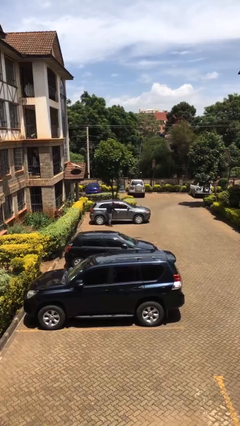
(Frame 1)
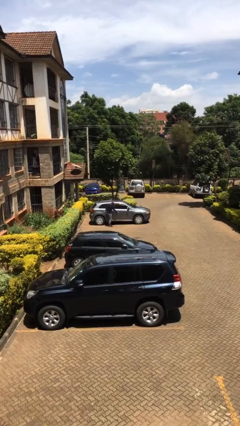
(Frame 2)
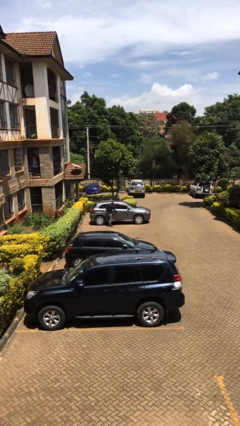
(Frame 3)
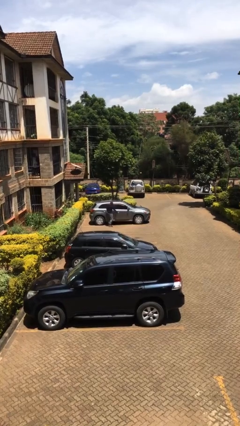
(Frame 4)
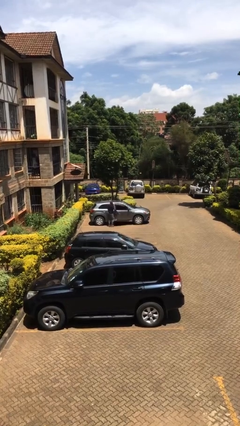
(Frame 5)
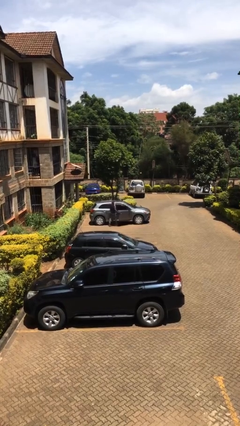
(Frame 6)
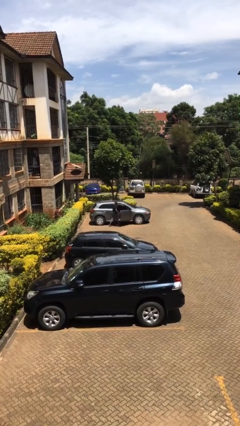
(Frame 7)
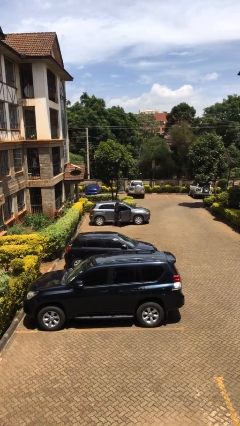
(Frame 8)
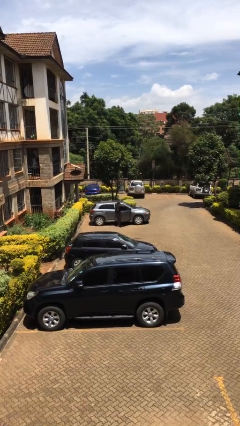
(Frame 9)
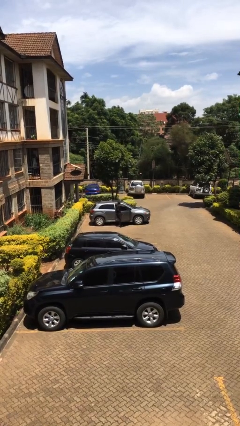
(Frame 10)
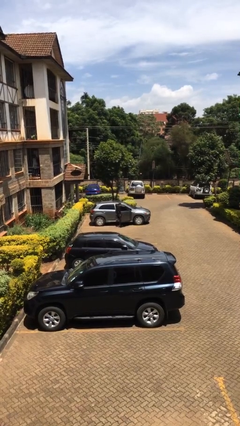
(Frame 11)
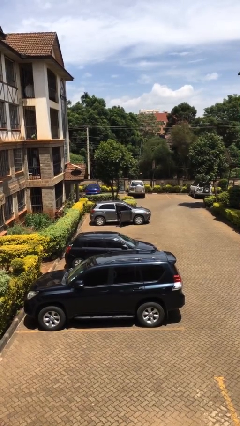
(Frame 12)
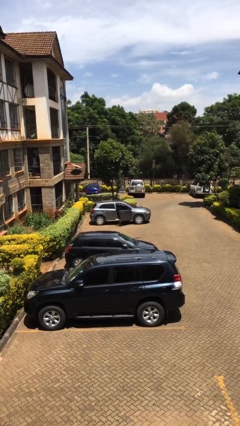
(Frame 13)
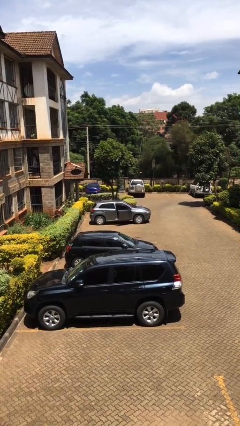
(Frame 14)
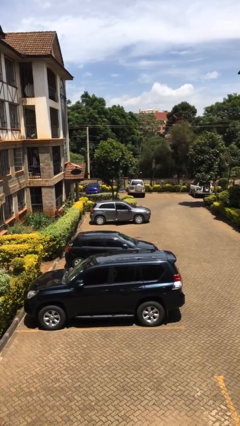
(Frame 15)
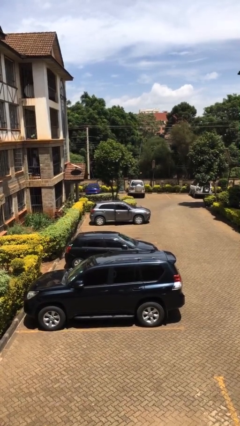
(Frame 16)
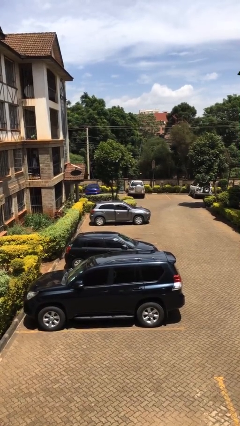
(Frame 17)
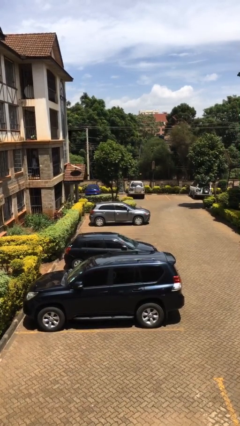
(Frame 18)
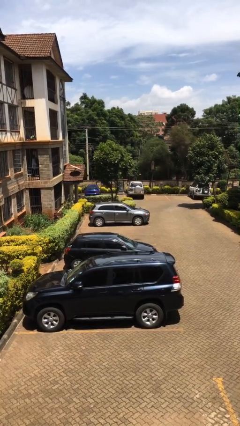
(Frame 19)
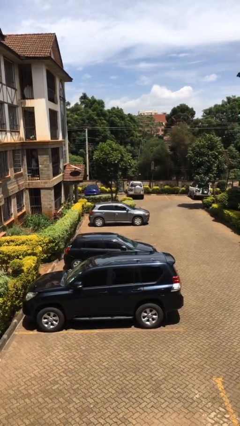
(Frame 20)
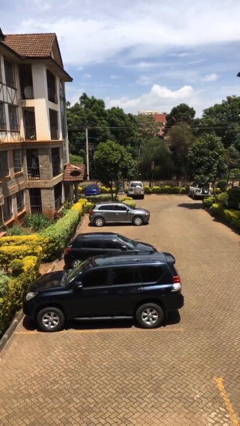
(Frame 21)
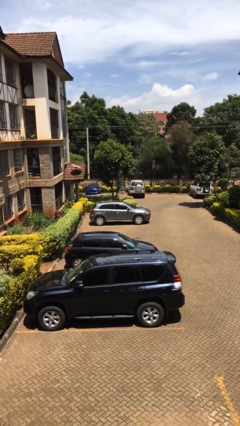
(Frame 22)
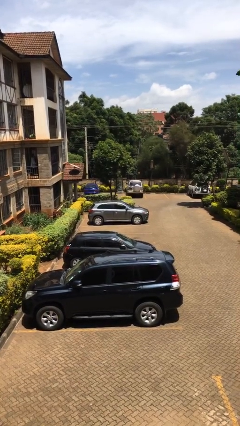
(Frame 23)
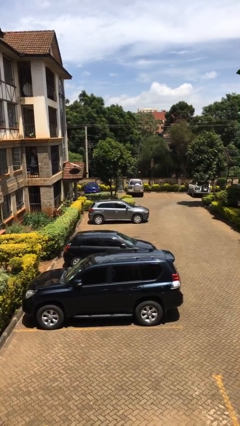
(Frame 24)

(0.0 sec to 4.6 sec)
car picks up person

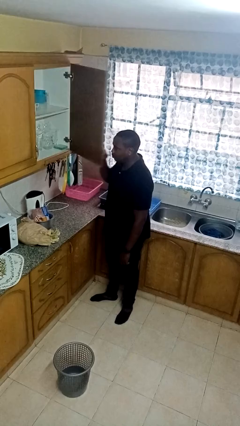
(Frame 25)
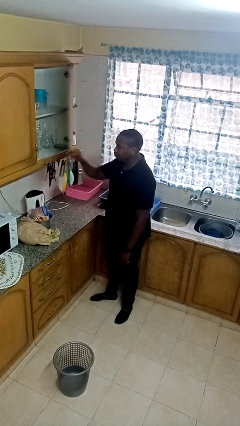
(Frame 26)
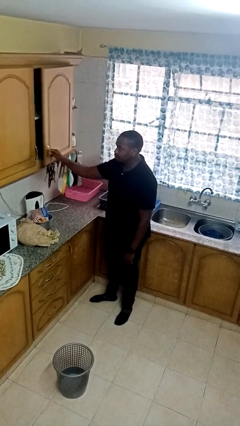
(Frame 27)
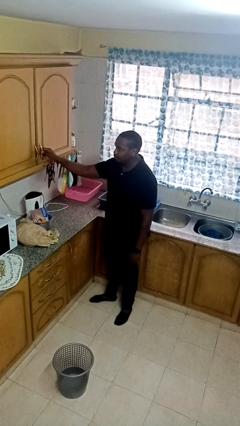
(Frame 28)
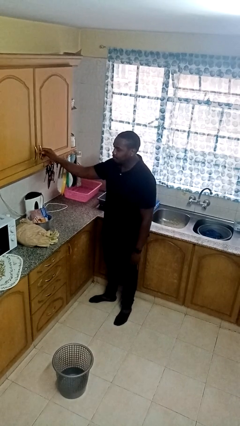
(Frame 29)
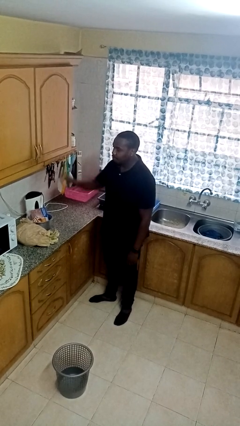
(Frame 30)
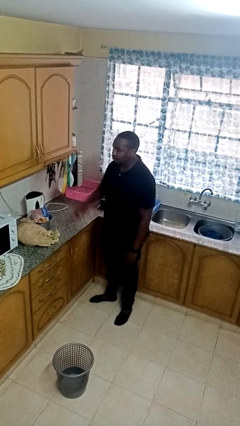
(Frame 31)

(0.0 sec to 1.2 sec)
person closes cabinet

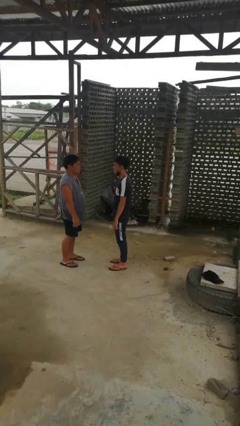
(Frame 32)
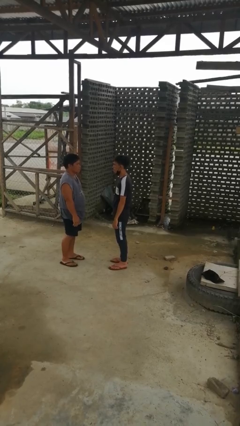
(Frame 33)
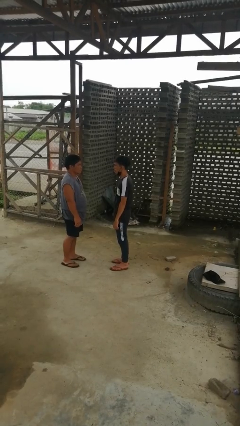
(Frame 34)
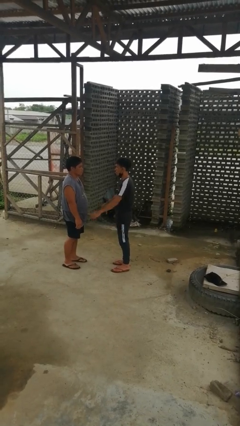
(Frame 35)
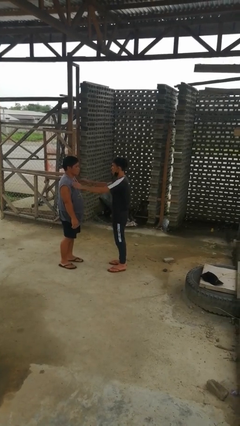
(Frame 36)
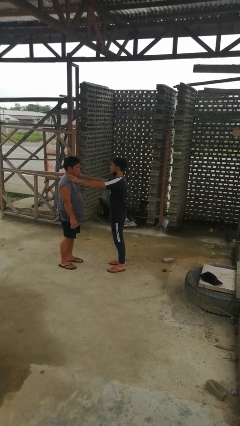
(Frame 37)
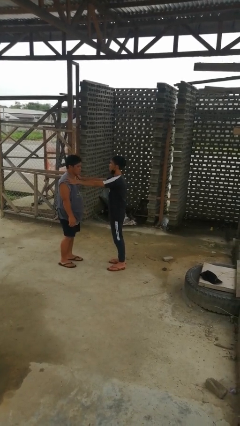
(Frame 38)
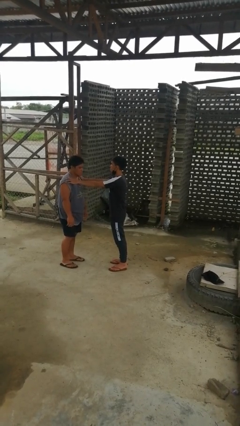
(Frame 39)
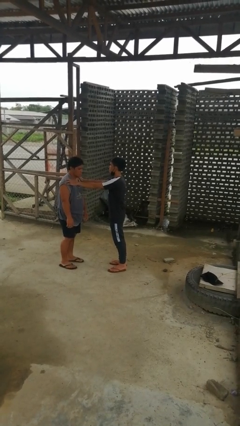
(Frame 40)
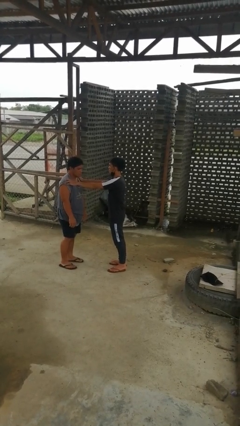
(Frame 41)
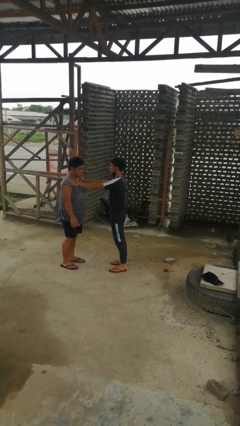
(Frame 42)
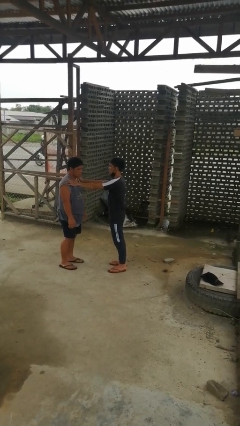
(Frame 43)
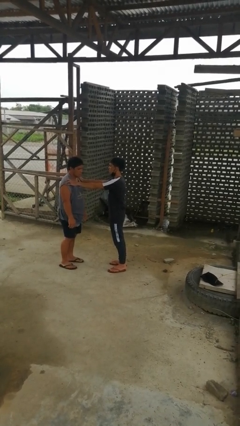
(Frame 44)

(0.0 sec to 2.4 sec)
person grabs person by shoulder

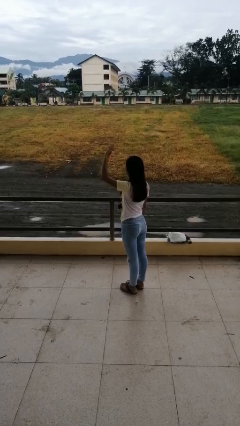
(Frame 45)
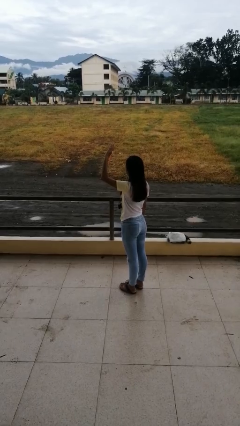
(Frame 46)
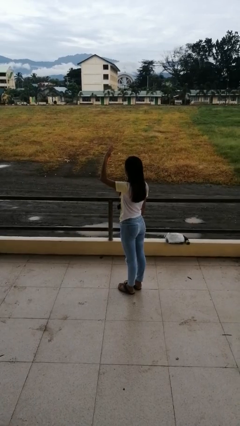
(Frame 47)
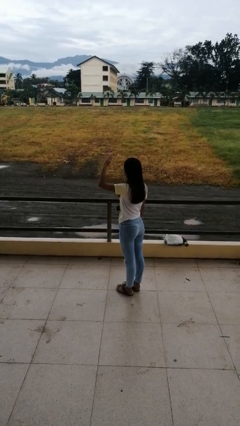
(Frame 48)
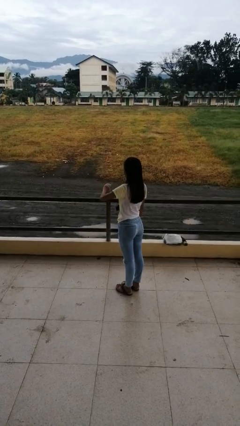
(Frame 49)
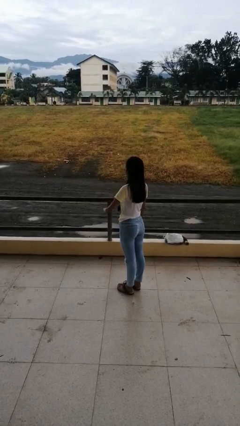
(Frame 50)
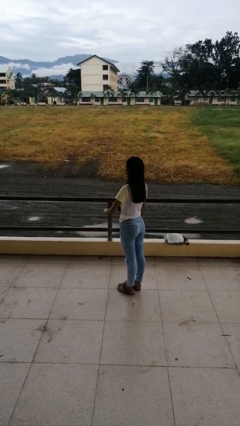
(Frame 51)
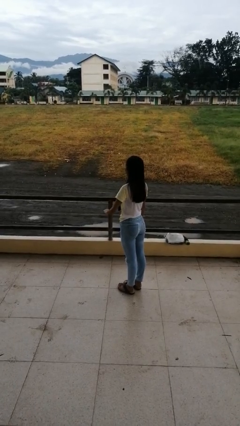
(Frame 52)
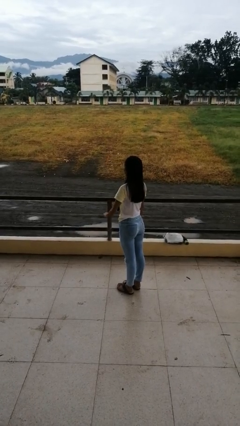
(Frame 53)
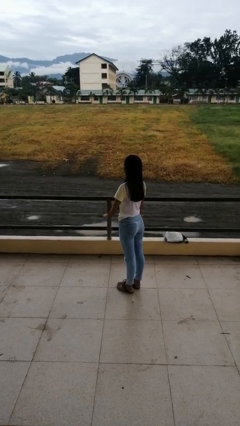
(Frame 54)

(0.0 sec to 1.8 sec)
person gestures swipe down

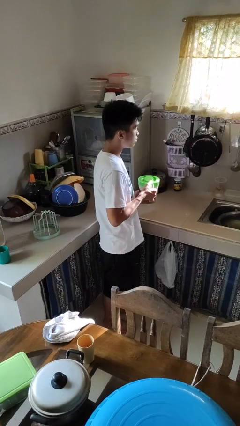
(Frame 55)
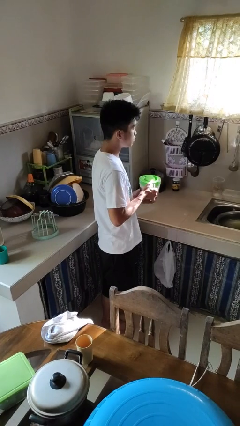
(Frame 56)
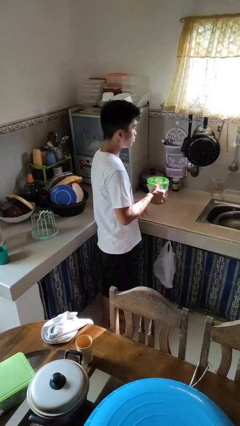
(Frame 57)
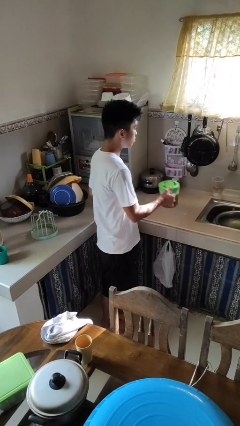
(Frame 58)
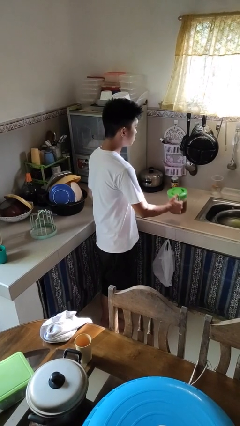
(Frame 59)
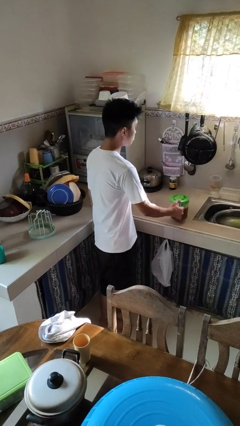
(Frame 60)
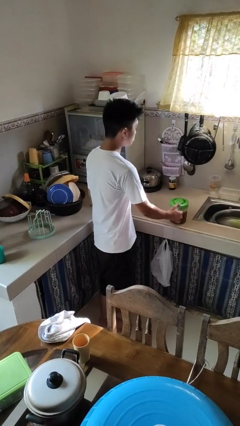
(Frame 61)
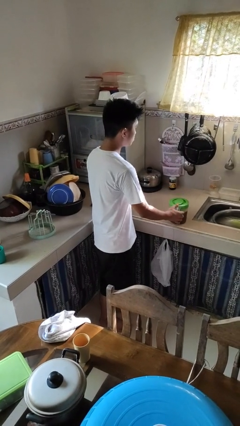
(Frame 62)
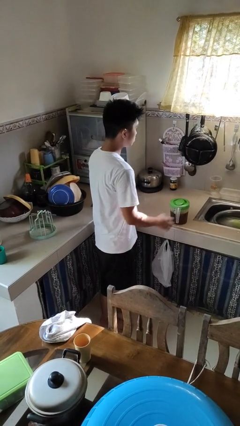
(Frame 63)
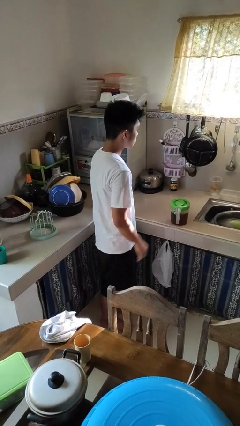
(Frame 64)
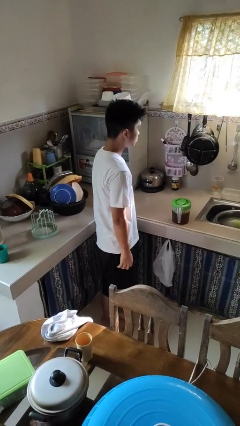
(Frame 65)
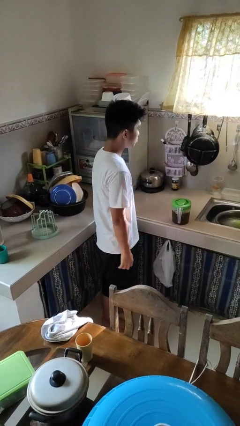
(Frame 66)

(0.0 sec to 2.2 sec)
person puts down object on countertop

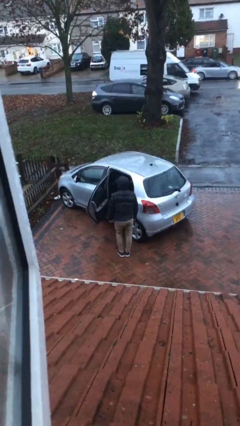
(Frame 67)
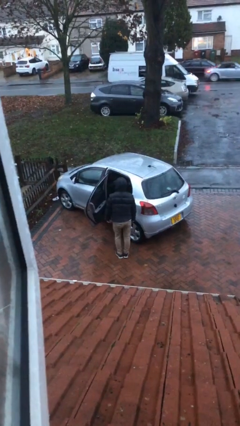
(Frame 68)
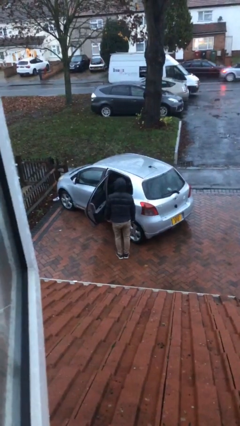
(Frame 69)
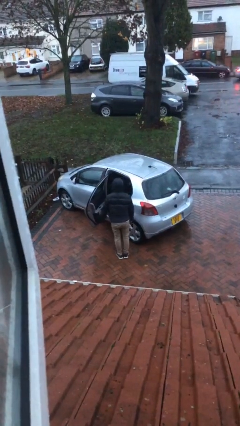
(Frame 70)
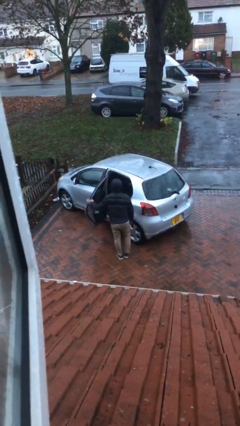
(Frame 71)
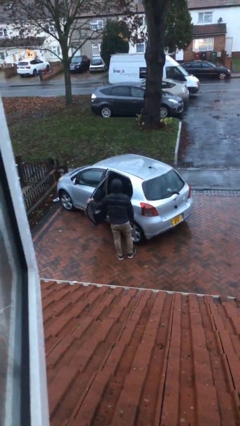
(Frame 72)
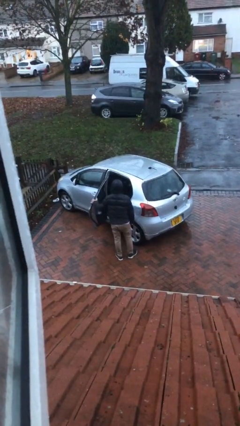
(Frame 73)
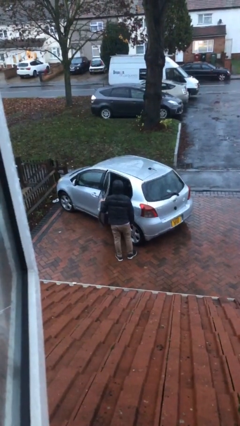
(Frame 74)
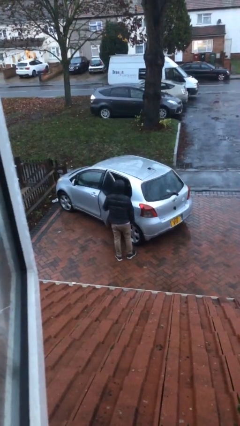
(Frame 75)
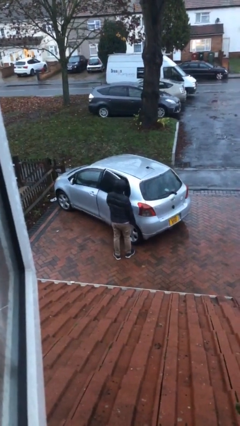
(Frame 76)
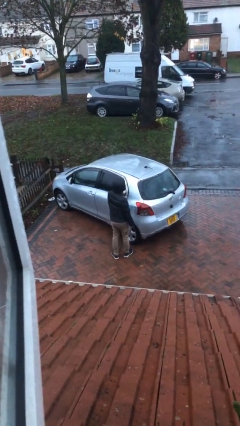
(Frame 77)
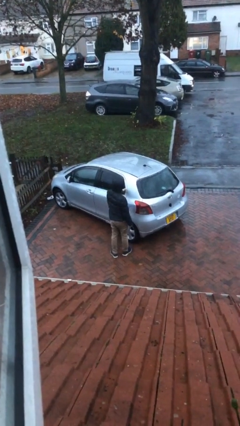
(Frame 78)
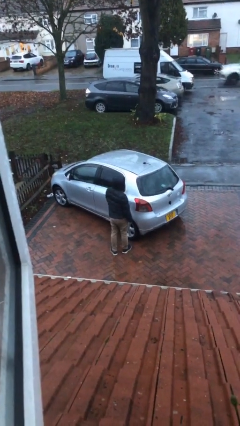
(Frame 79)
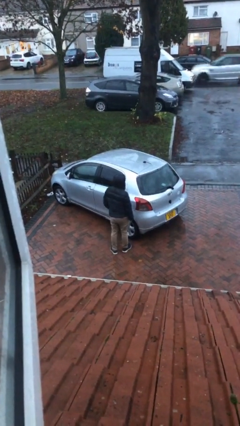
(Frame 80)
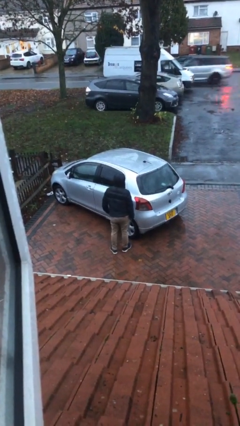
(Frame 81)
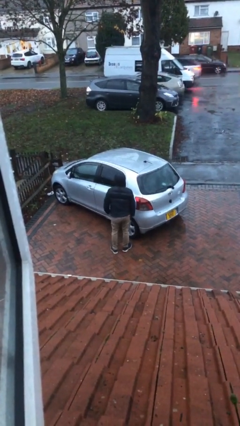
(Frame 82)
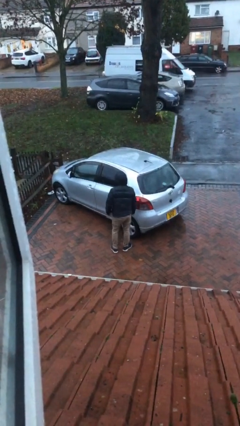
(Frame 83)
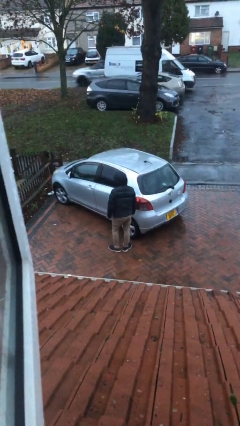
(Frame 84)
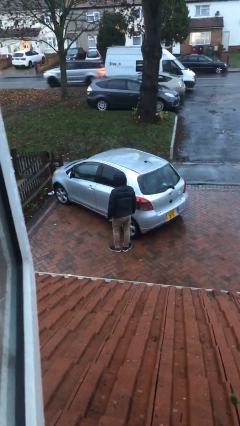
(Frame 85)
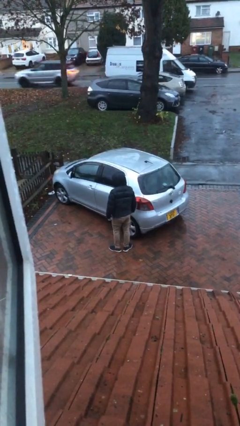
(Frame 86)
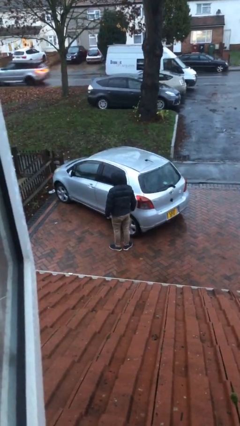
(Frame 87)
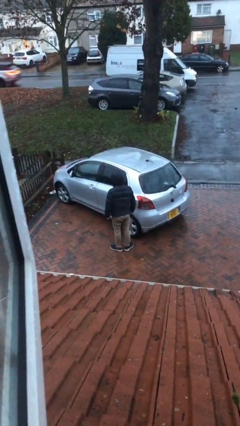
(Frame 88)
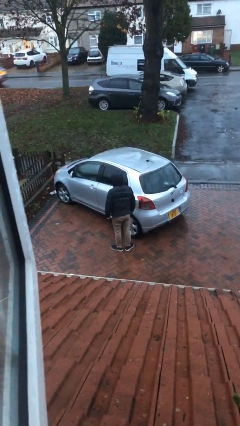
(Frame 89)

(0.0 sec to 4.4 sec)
person closes car door

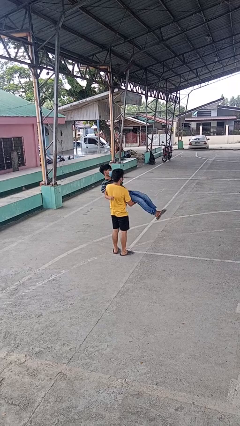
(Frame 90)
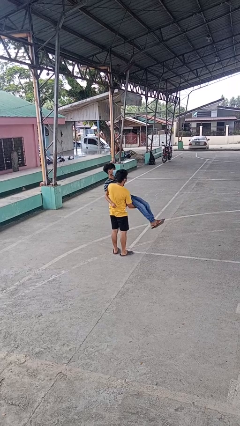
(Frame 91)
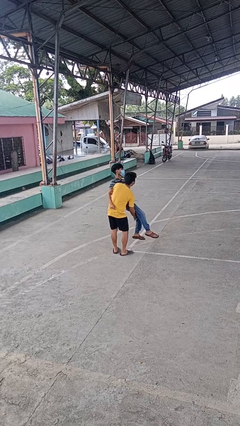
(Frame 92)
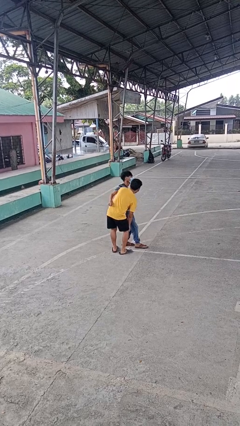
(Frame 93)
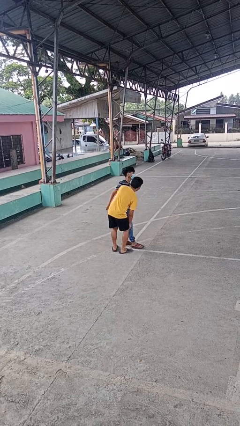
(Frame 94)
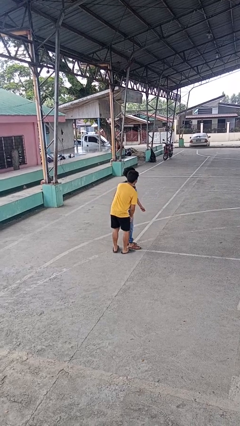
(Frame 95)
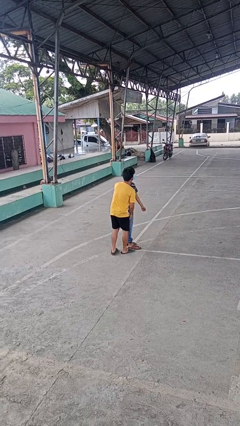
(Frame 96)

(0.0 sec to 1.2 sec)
person puts down person
